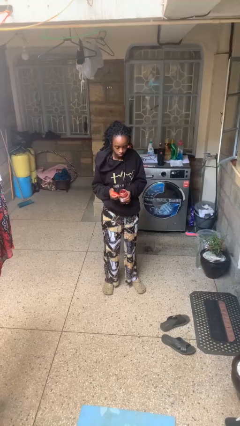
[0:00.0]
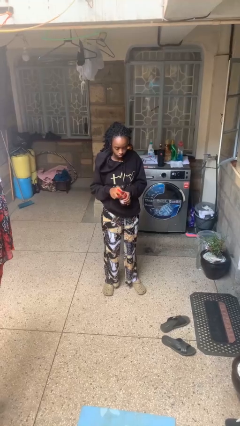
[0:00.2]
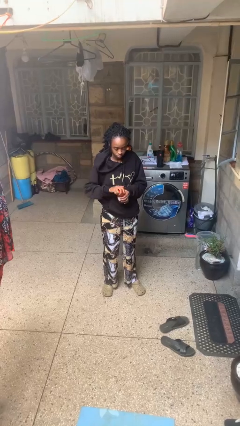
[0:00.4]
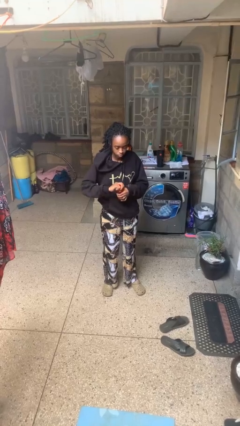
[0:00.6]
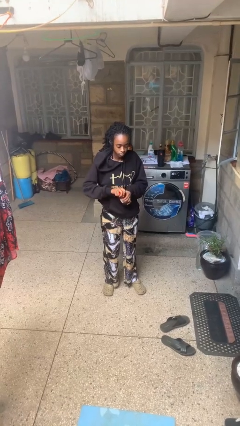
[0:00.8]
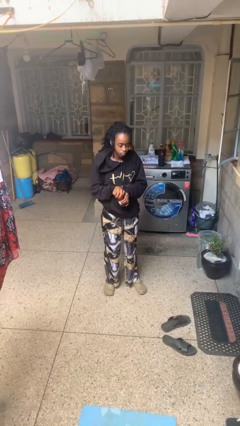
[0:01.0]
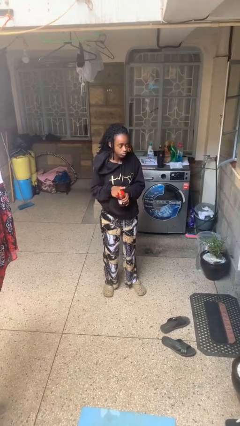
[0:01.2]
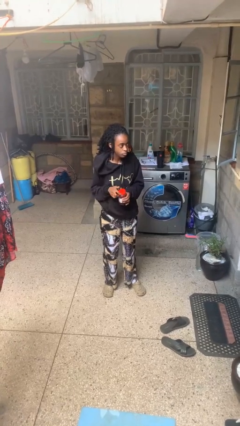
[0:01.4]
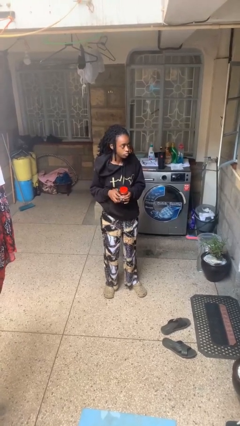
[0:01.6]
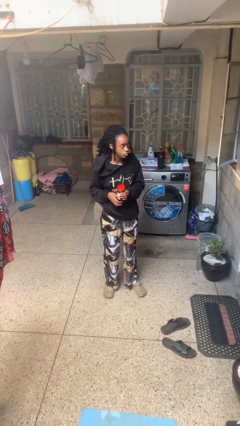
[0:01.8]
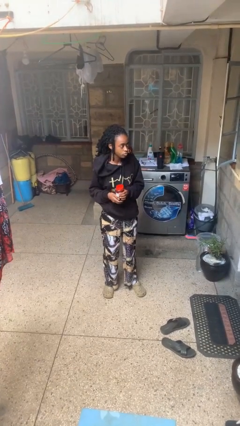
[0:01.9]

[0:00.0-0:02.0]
person closes jar

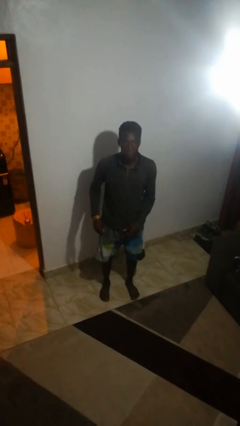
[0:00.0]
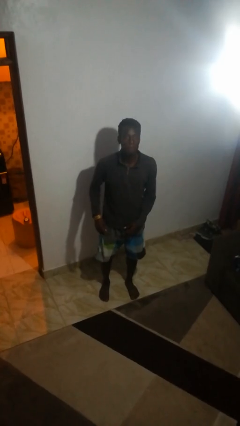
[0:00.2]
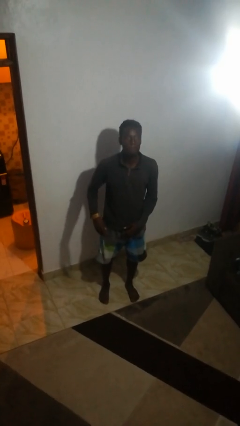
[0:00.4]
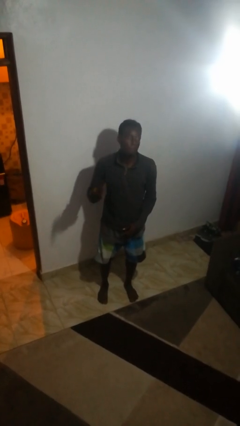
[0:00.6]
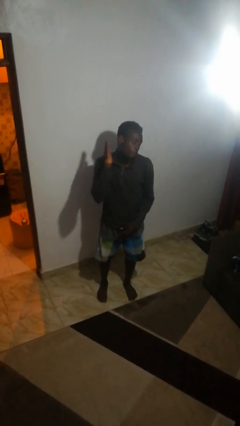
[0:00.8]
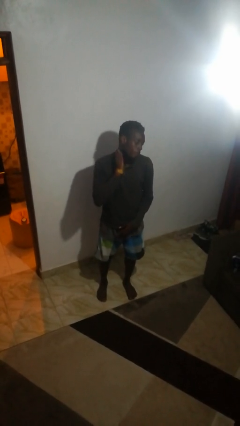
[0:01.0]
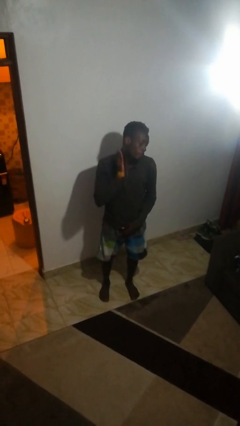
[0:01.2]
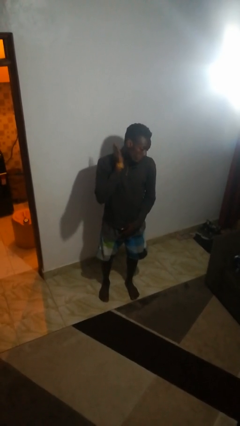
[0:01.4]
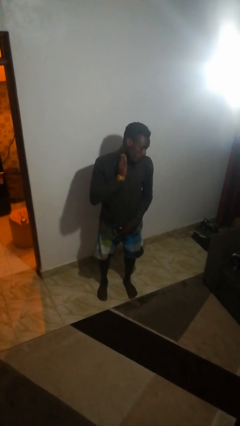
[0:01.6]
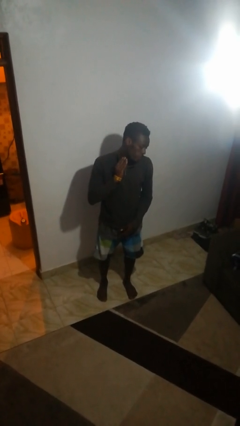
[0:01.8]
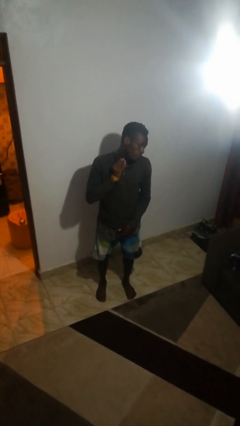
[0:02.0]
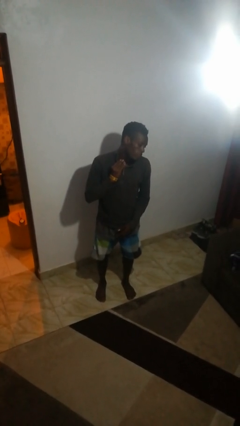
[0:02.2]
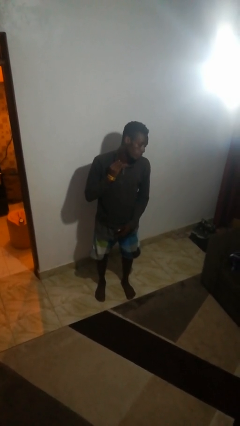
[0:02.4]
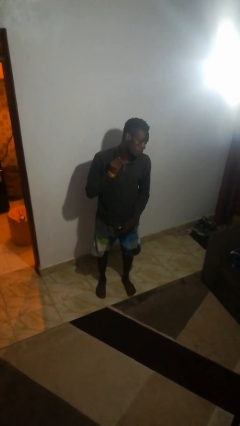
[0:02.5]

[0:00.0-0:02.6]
person swats bug

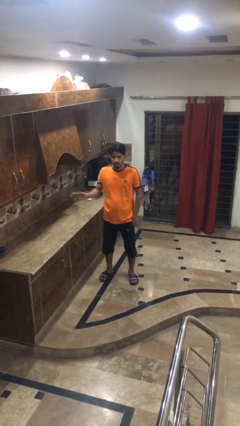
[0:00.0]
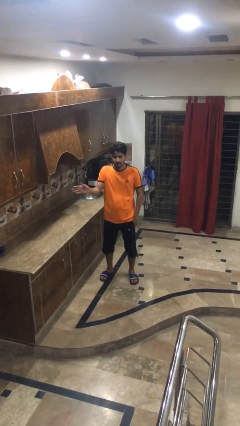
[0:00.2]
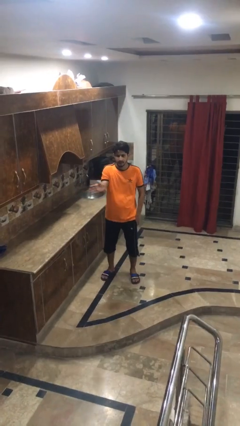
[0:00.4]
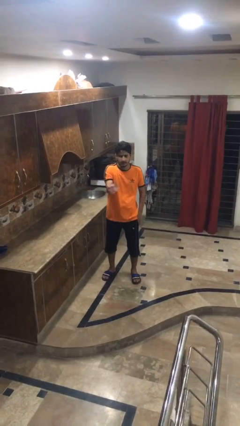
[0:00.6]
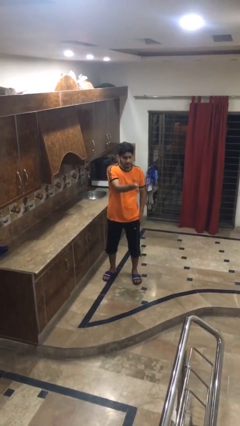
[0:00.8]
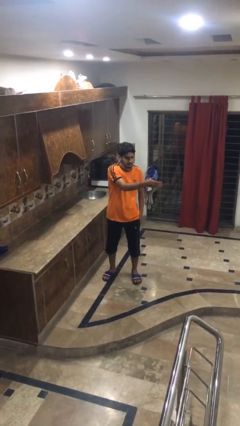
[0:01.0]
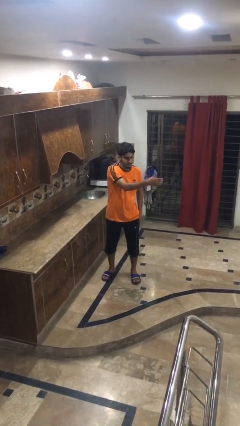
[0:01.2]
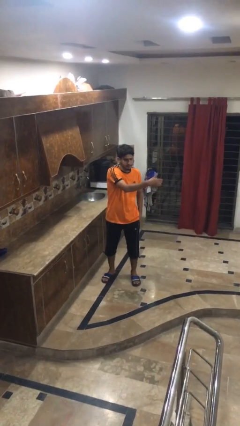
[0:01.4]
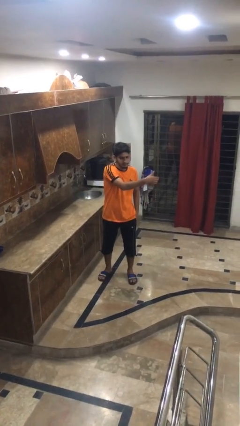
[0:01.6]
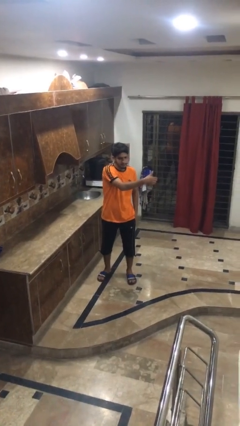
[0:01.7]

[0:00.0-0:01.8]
person gestures swipe left

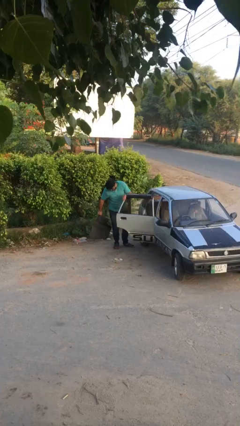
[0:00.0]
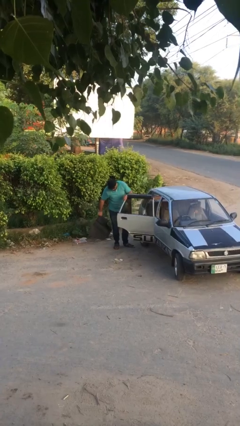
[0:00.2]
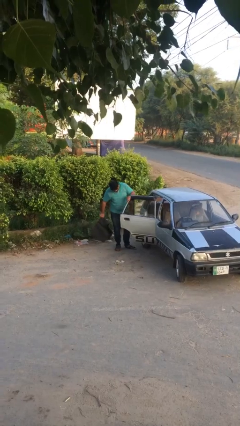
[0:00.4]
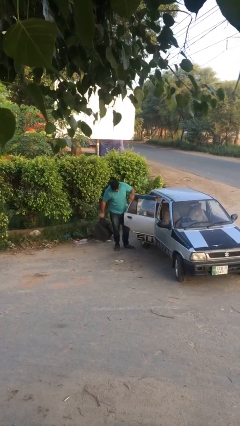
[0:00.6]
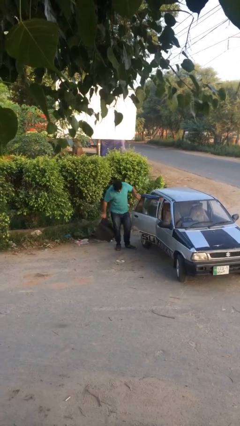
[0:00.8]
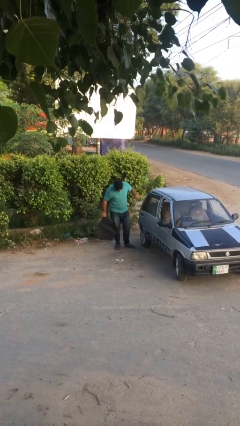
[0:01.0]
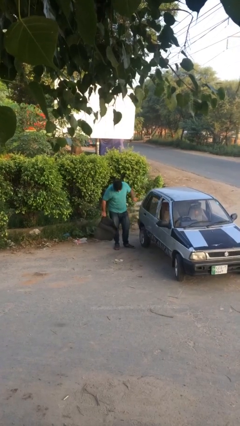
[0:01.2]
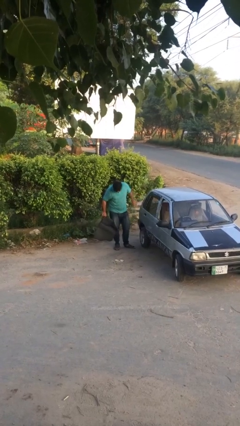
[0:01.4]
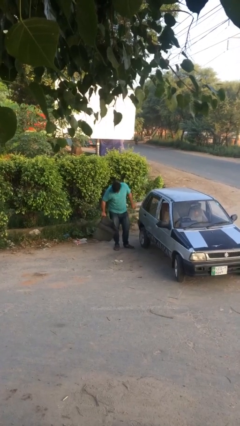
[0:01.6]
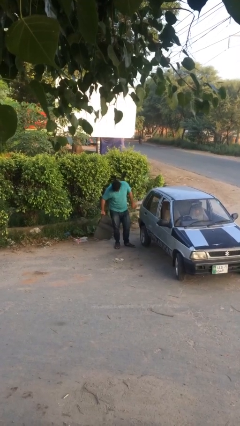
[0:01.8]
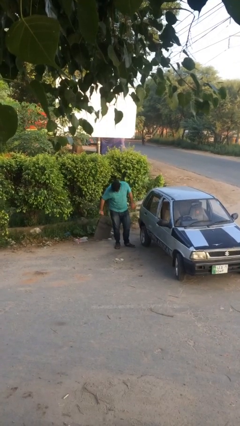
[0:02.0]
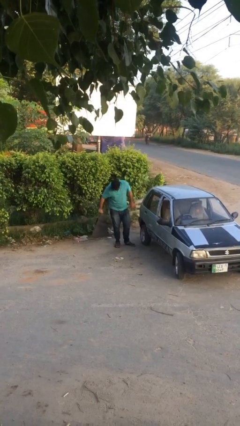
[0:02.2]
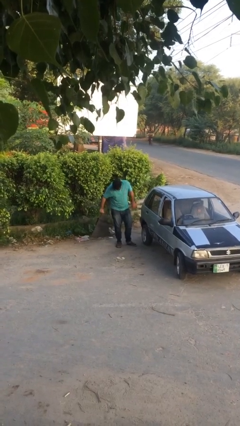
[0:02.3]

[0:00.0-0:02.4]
person closes car door

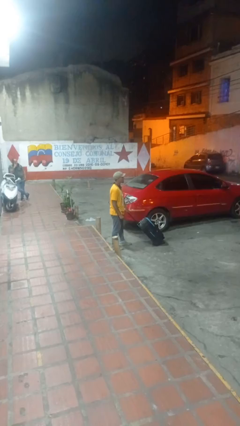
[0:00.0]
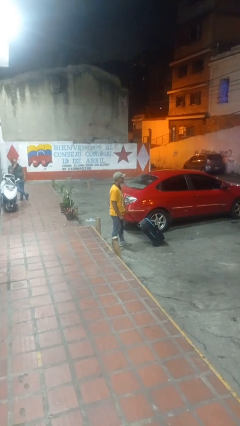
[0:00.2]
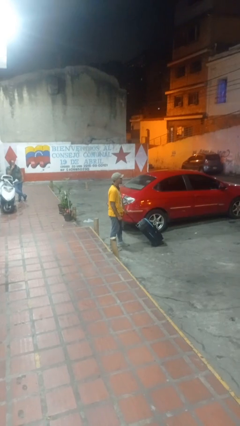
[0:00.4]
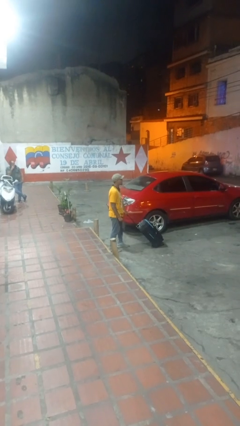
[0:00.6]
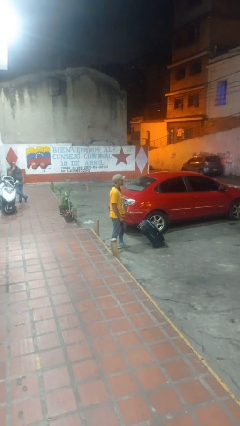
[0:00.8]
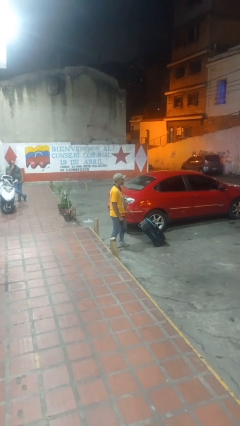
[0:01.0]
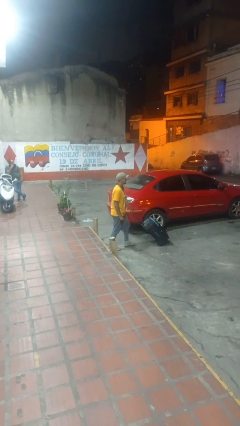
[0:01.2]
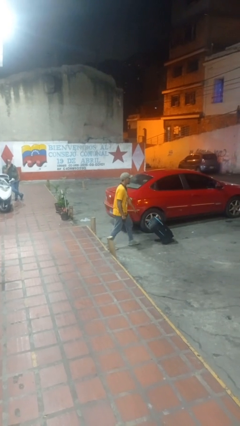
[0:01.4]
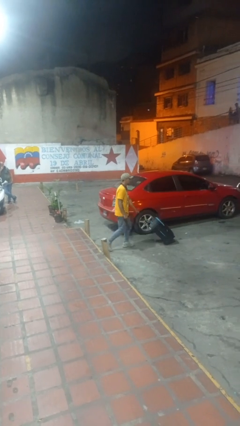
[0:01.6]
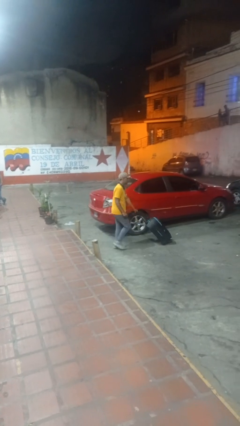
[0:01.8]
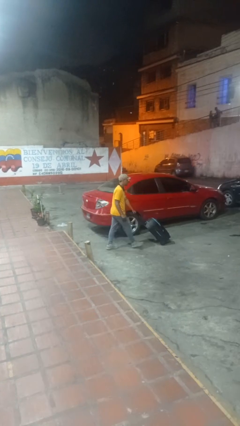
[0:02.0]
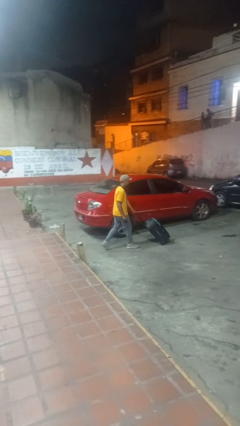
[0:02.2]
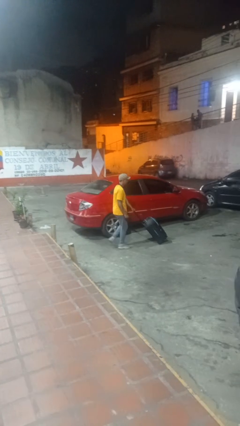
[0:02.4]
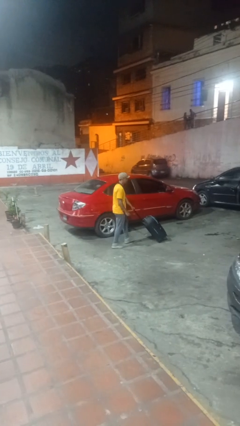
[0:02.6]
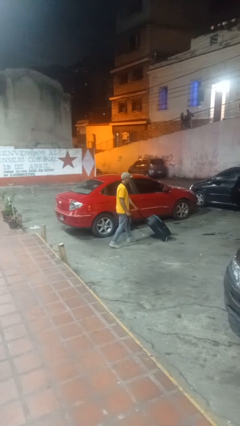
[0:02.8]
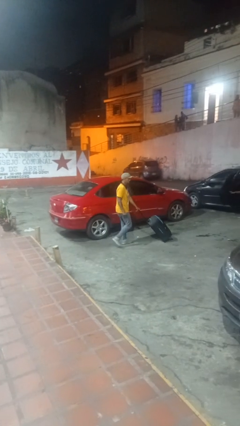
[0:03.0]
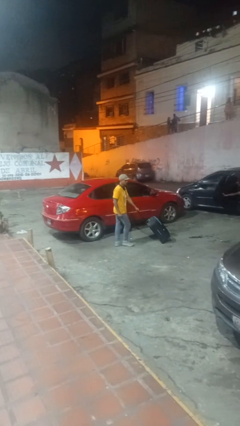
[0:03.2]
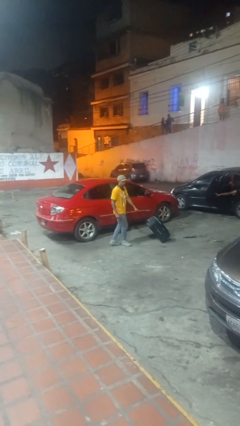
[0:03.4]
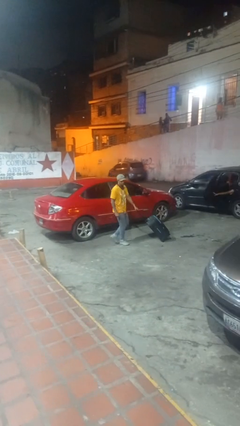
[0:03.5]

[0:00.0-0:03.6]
person pushes wheeled cart

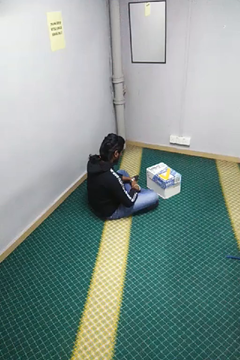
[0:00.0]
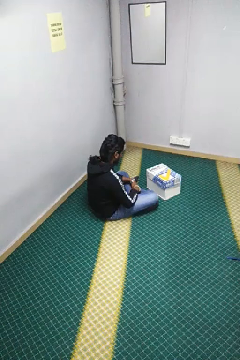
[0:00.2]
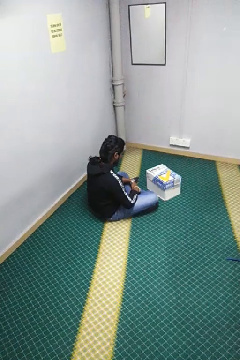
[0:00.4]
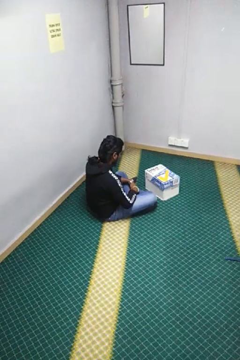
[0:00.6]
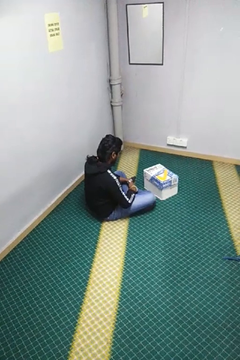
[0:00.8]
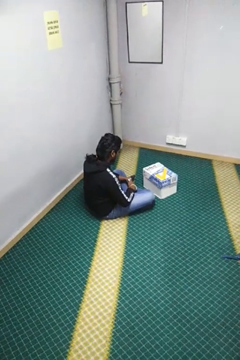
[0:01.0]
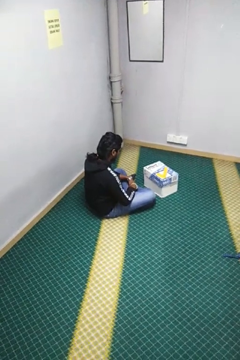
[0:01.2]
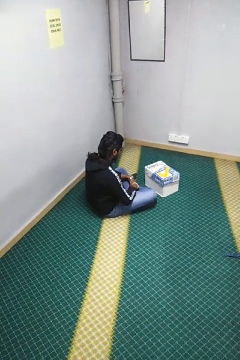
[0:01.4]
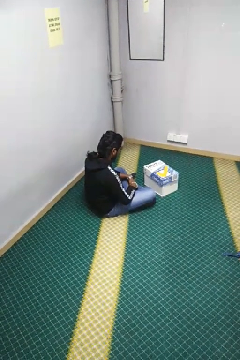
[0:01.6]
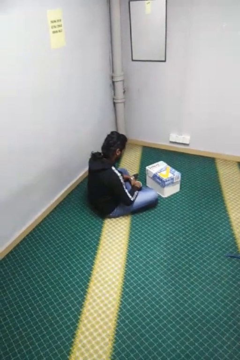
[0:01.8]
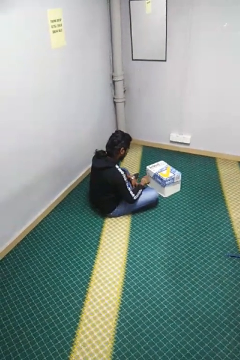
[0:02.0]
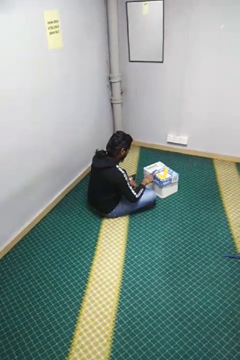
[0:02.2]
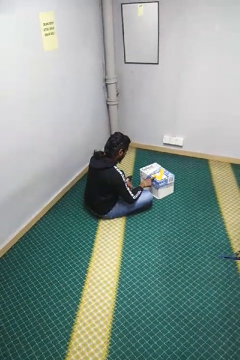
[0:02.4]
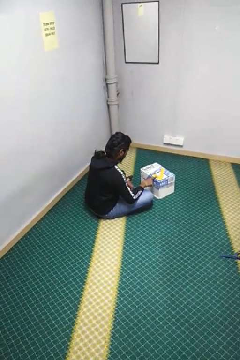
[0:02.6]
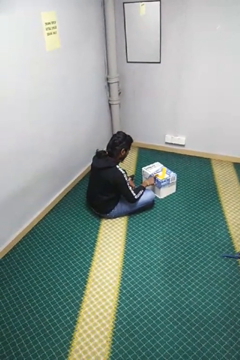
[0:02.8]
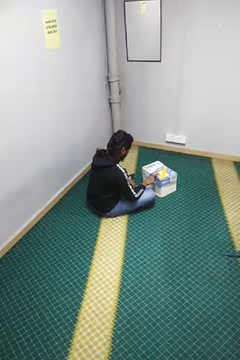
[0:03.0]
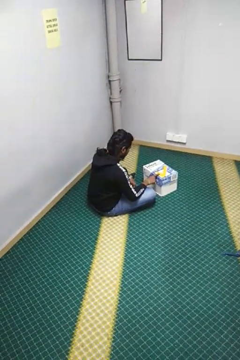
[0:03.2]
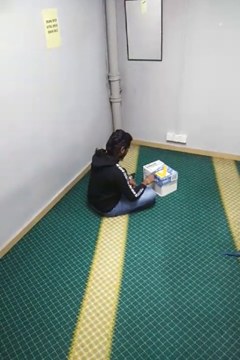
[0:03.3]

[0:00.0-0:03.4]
person taps object with finger

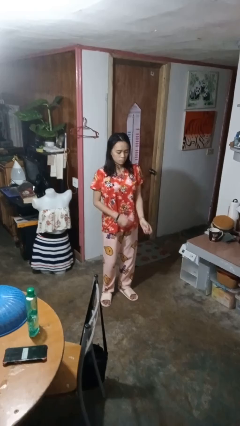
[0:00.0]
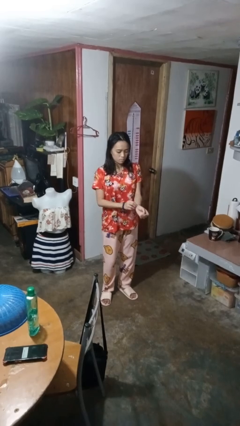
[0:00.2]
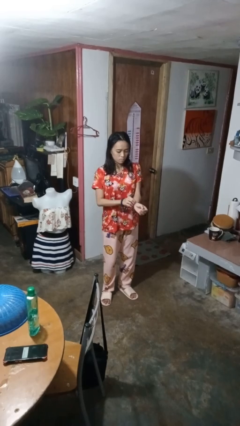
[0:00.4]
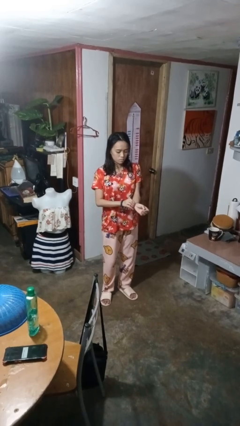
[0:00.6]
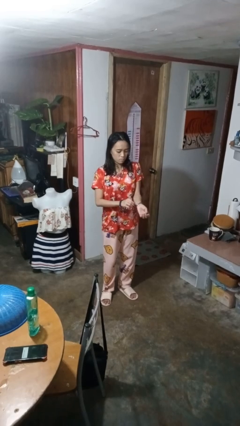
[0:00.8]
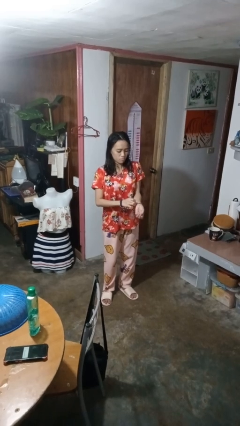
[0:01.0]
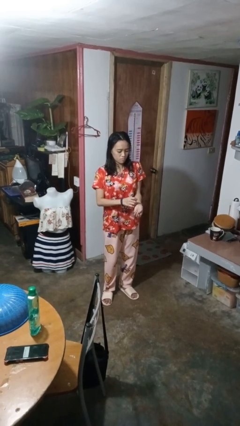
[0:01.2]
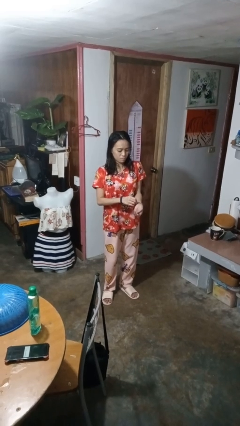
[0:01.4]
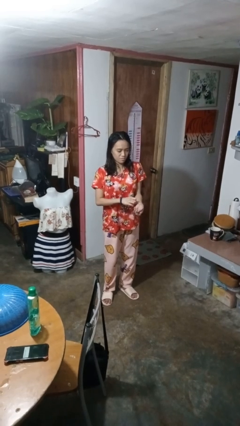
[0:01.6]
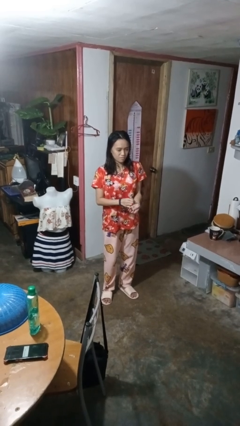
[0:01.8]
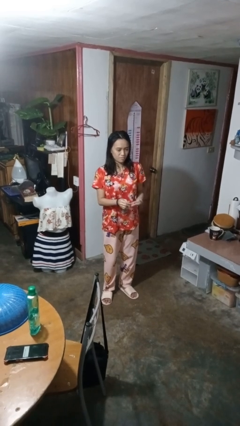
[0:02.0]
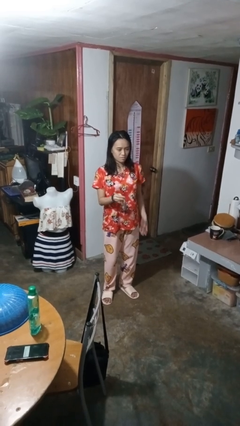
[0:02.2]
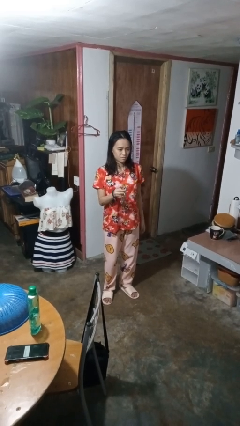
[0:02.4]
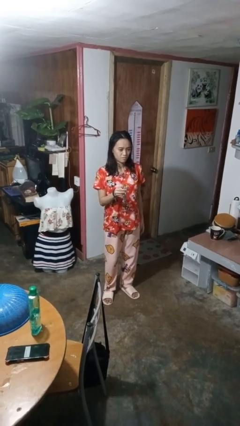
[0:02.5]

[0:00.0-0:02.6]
person takes off wristwatch
